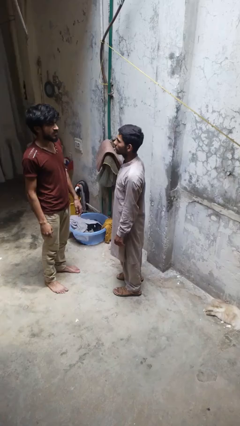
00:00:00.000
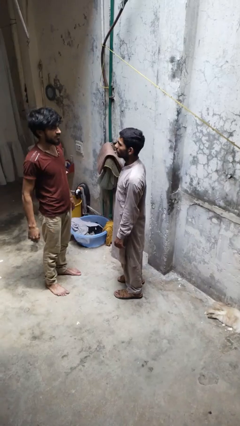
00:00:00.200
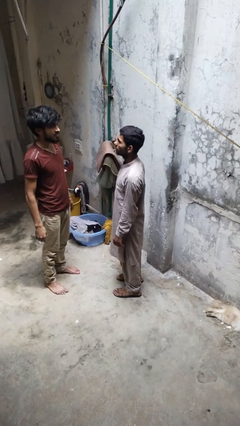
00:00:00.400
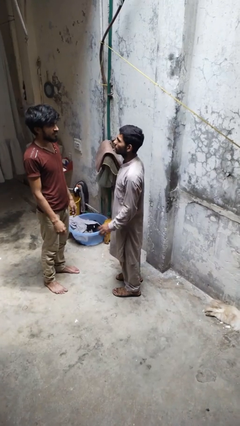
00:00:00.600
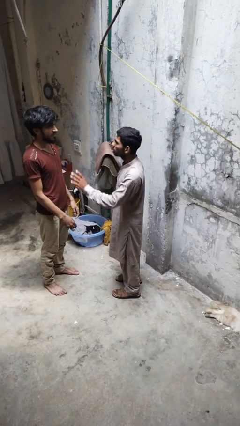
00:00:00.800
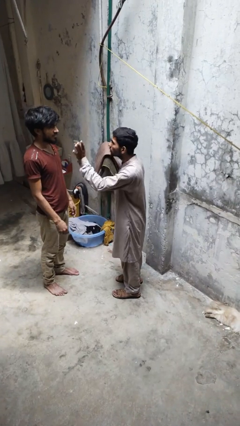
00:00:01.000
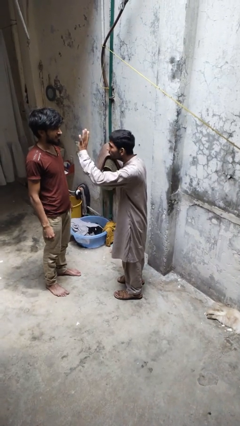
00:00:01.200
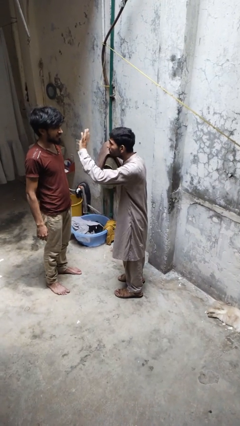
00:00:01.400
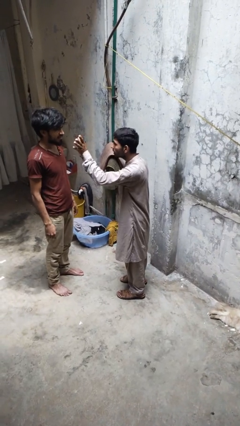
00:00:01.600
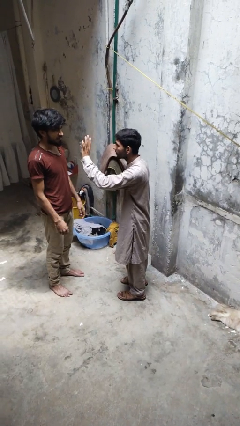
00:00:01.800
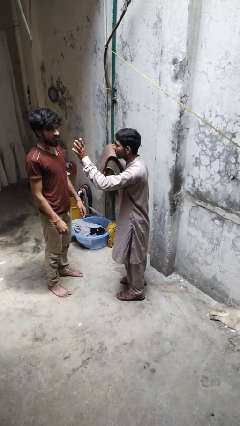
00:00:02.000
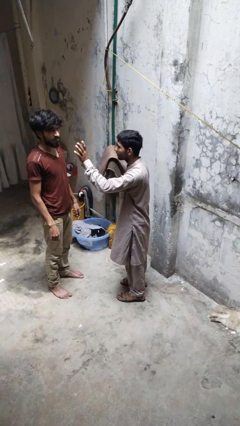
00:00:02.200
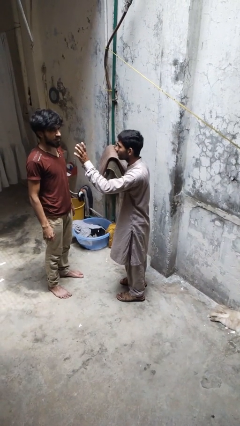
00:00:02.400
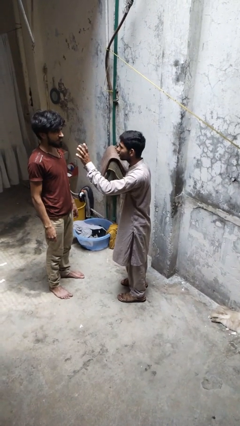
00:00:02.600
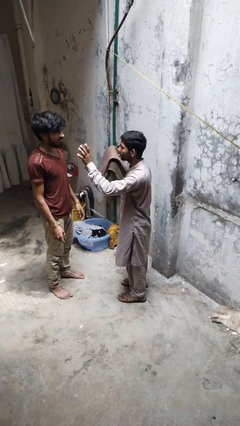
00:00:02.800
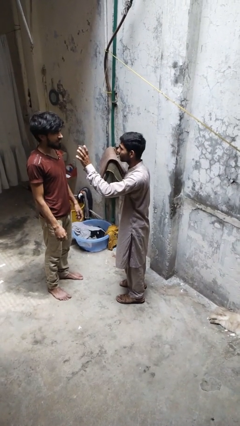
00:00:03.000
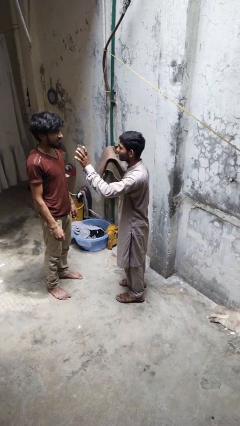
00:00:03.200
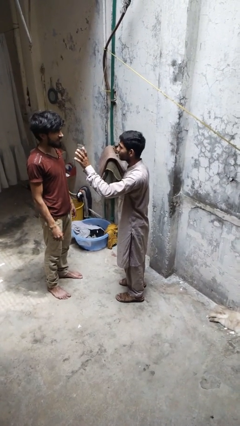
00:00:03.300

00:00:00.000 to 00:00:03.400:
person waves at person

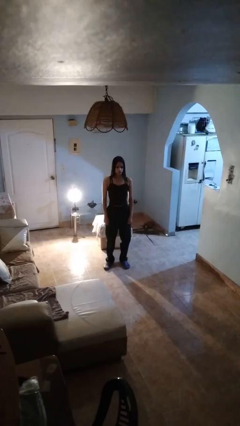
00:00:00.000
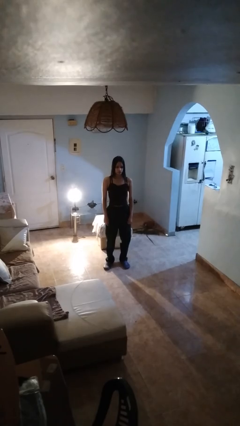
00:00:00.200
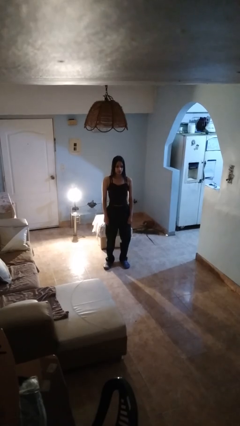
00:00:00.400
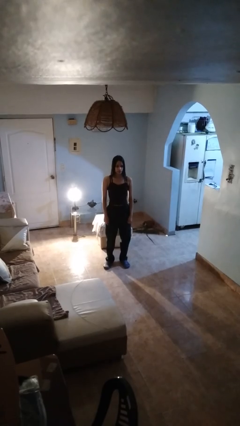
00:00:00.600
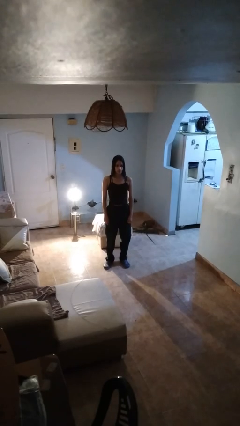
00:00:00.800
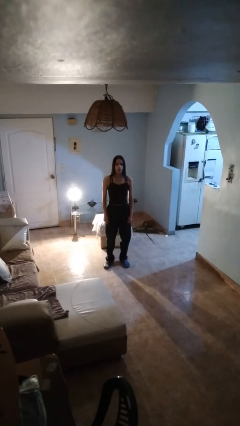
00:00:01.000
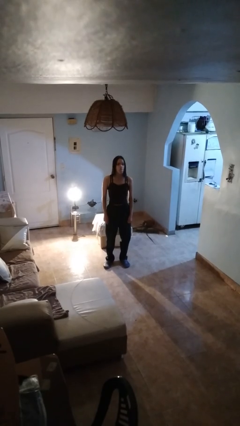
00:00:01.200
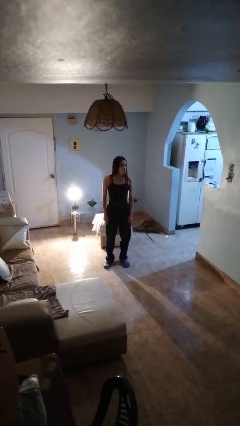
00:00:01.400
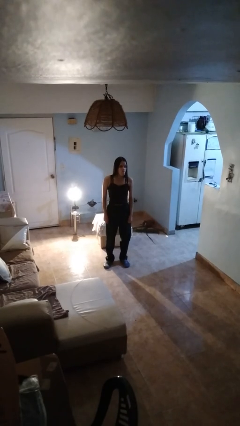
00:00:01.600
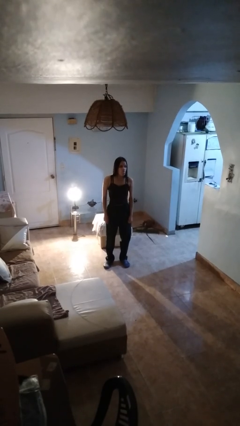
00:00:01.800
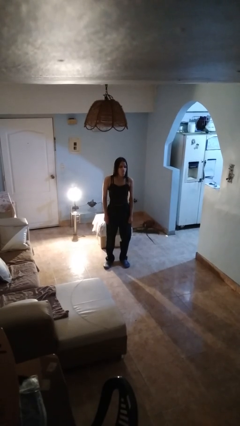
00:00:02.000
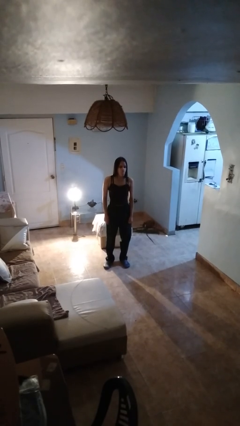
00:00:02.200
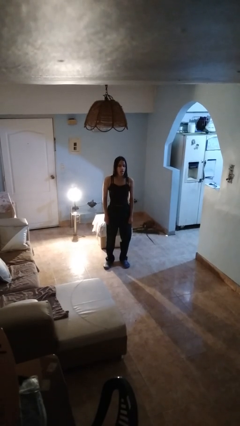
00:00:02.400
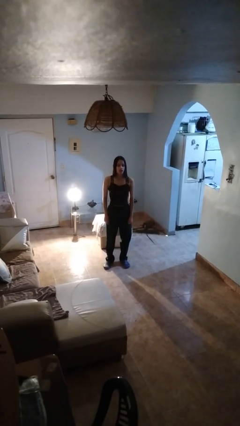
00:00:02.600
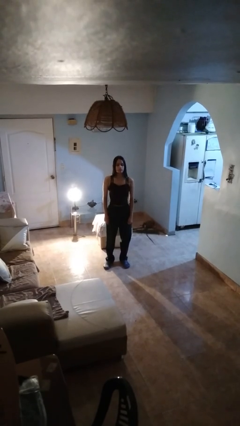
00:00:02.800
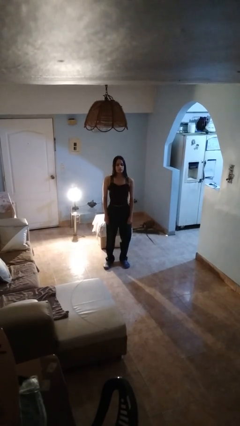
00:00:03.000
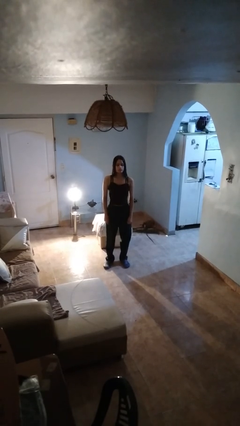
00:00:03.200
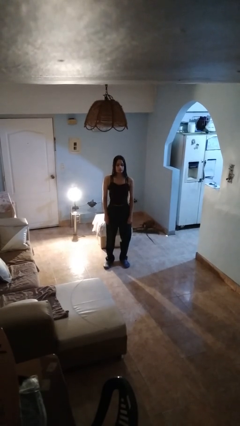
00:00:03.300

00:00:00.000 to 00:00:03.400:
person sticks out tongue

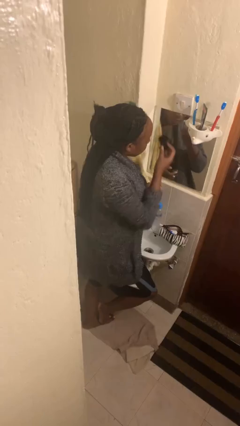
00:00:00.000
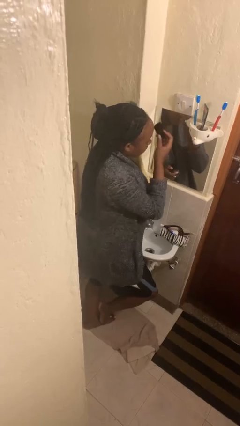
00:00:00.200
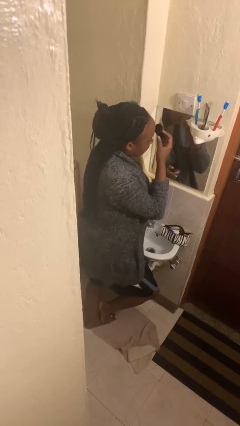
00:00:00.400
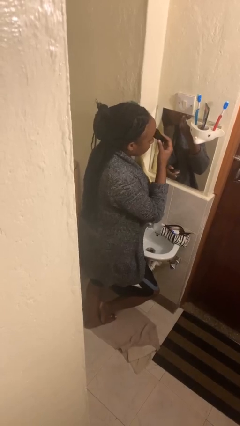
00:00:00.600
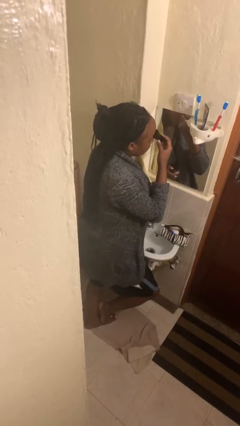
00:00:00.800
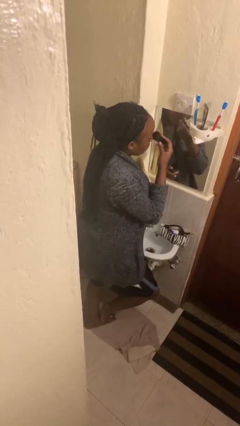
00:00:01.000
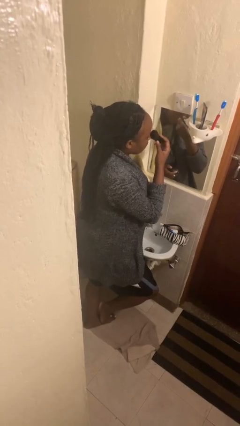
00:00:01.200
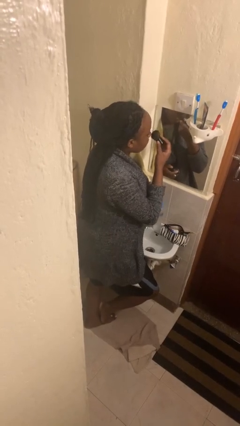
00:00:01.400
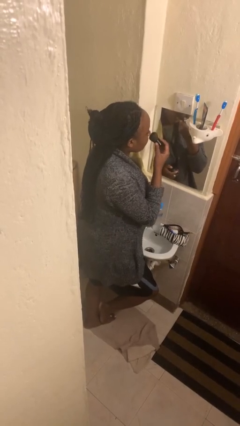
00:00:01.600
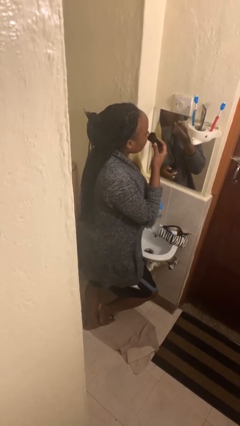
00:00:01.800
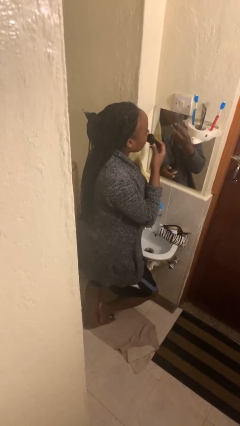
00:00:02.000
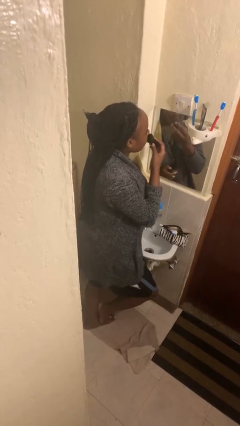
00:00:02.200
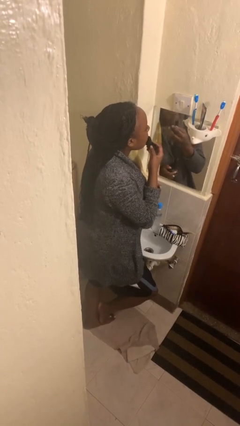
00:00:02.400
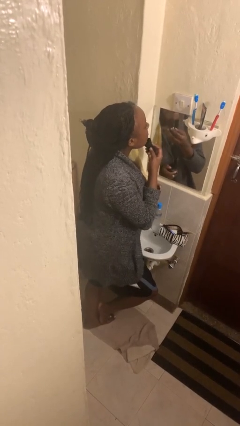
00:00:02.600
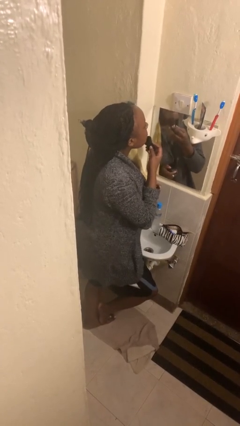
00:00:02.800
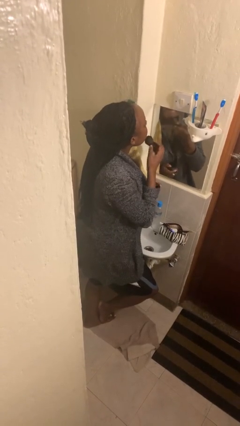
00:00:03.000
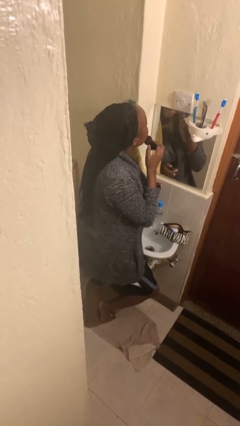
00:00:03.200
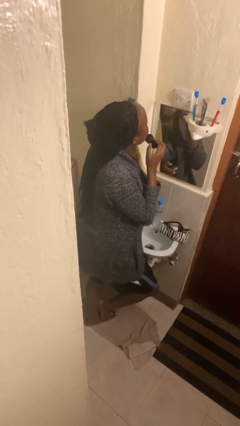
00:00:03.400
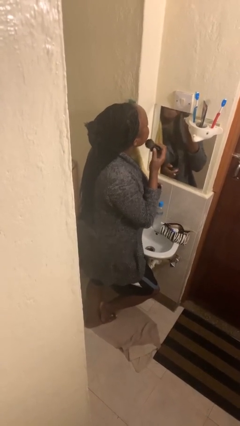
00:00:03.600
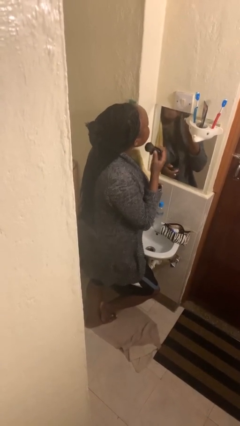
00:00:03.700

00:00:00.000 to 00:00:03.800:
person applies foundation makeup

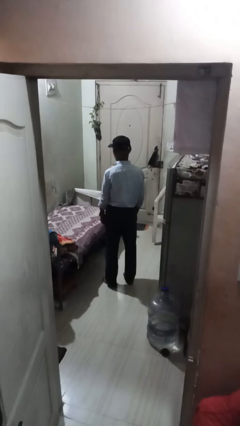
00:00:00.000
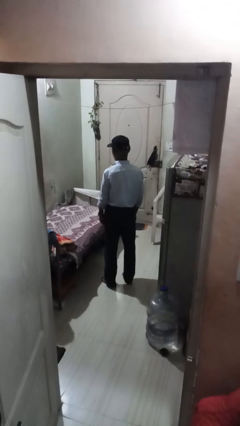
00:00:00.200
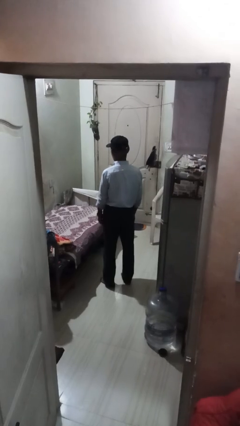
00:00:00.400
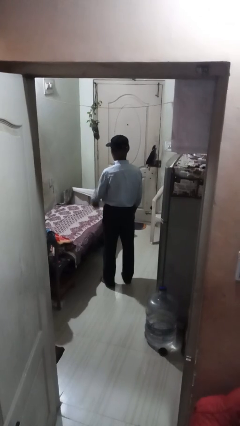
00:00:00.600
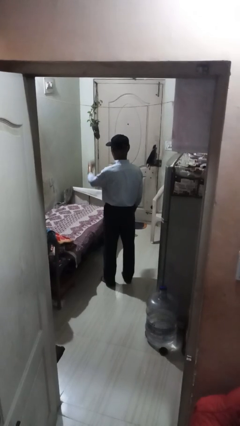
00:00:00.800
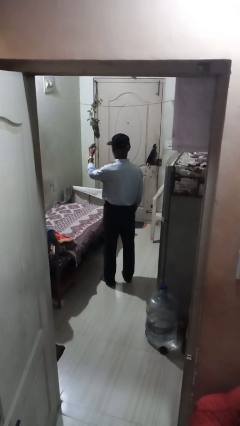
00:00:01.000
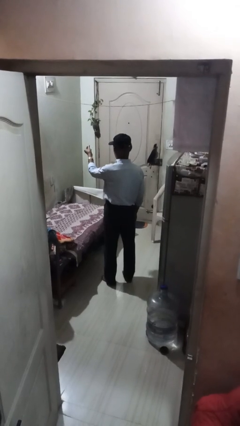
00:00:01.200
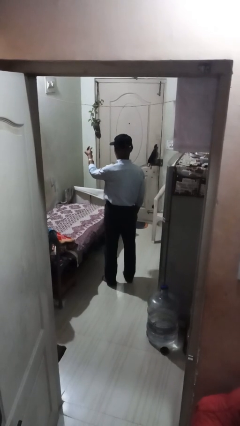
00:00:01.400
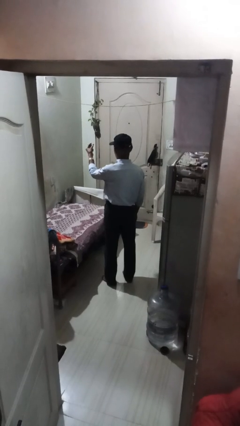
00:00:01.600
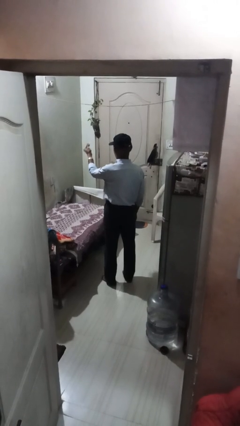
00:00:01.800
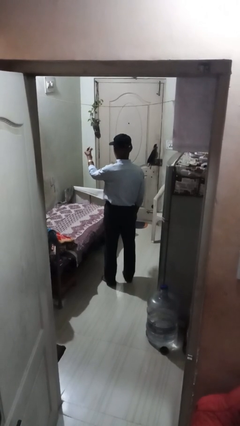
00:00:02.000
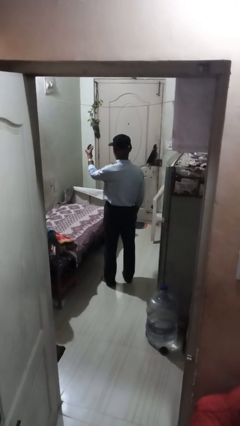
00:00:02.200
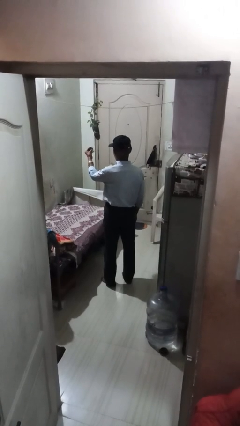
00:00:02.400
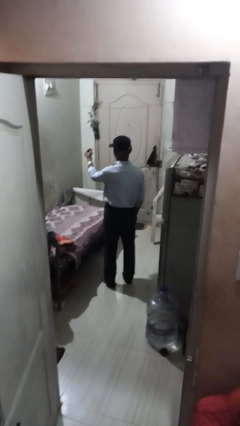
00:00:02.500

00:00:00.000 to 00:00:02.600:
person snaps fingers

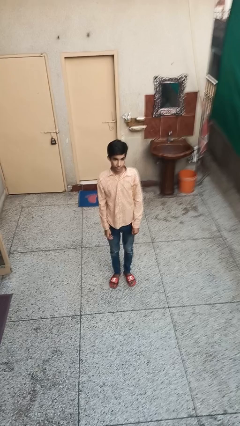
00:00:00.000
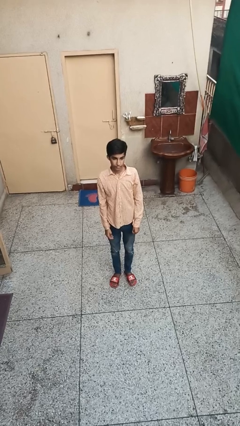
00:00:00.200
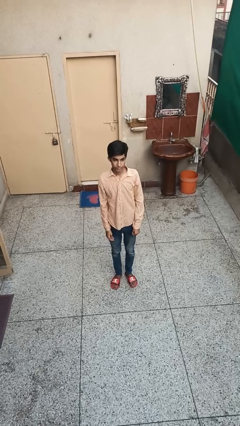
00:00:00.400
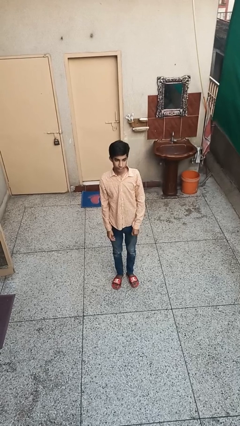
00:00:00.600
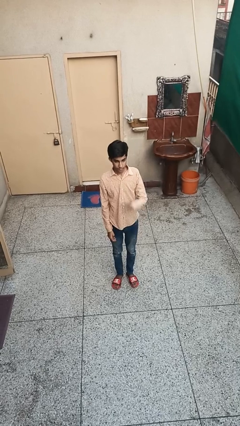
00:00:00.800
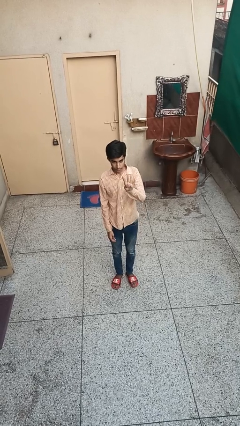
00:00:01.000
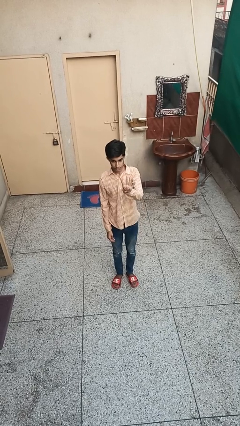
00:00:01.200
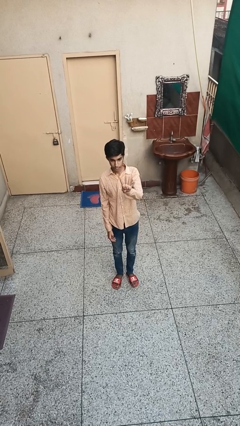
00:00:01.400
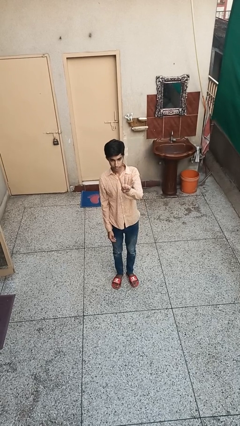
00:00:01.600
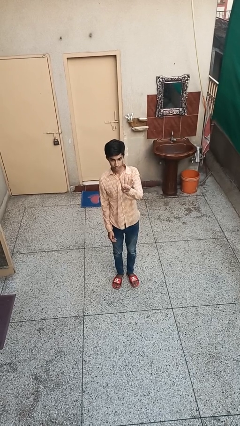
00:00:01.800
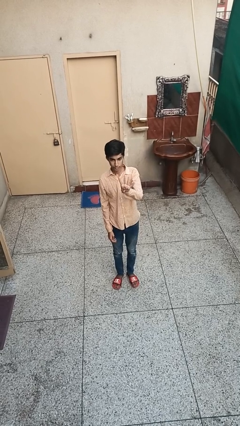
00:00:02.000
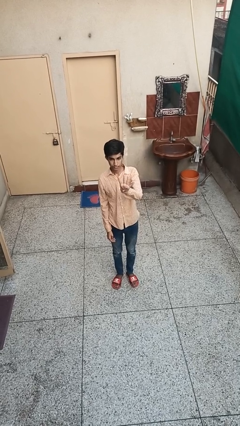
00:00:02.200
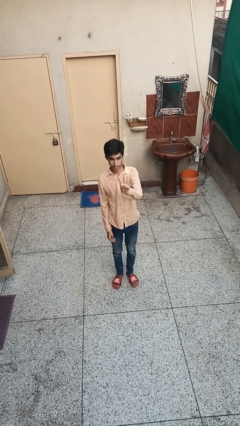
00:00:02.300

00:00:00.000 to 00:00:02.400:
person gestures number four

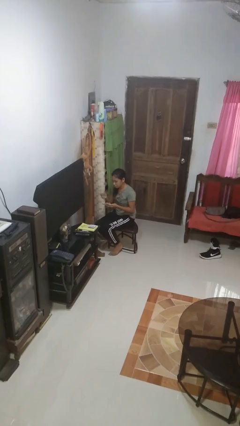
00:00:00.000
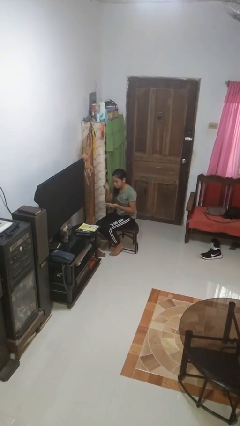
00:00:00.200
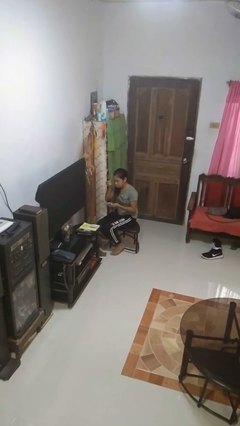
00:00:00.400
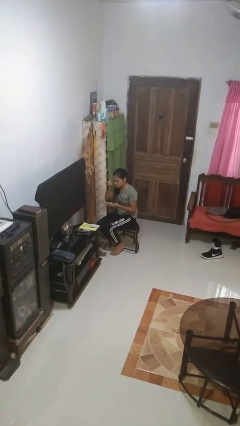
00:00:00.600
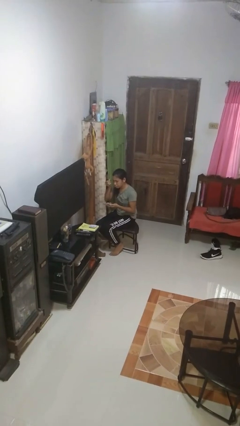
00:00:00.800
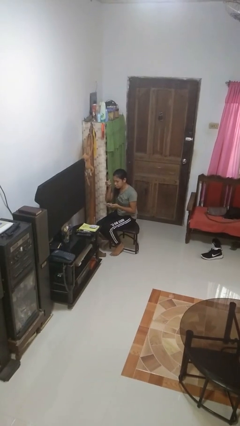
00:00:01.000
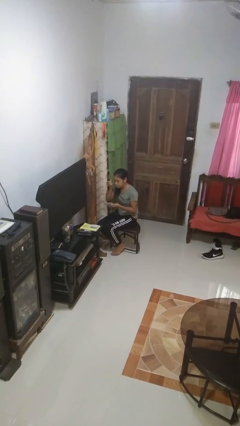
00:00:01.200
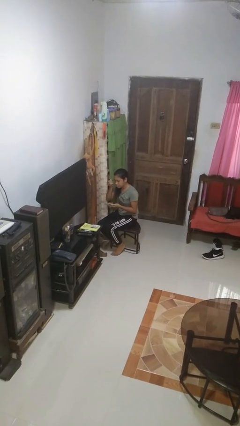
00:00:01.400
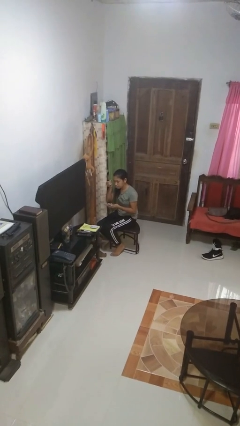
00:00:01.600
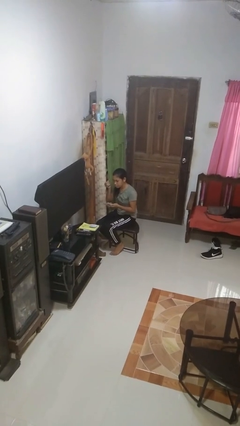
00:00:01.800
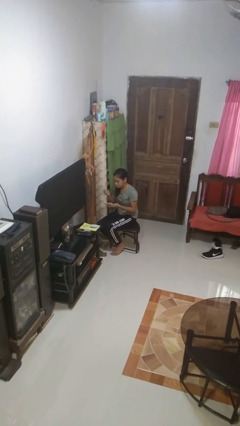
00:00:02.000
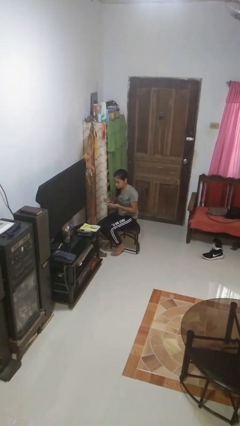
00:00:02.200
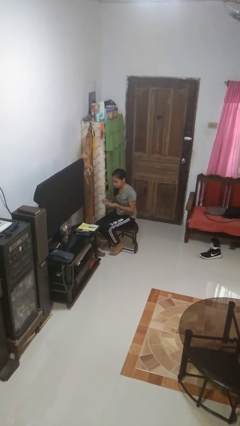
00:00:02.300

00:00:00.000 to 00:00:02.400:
person applies eye makeup
